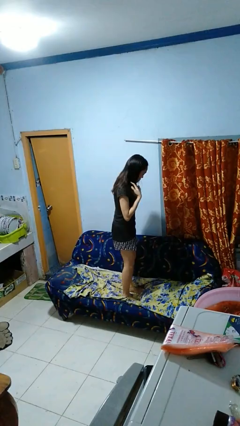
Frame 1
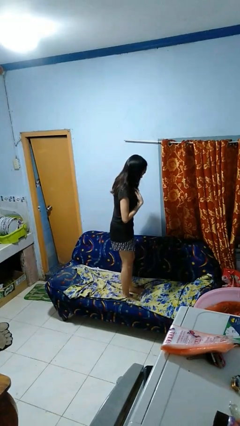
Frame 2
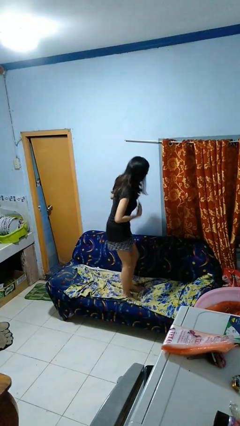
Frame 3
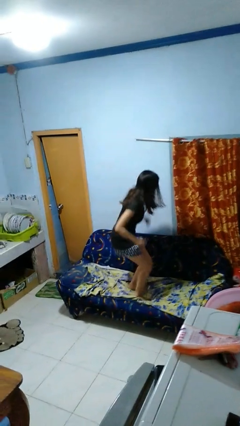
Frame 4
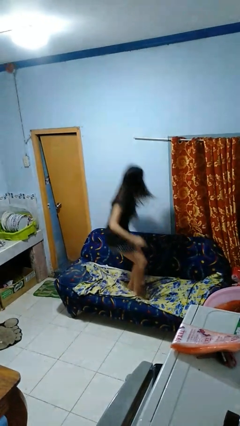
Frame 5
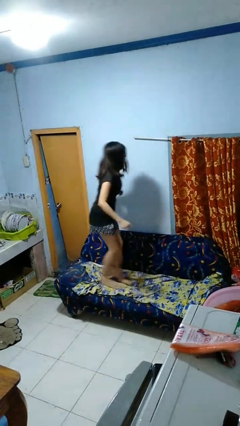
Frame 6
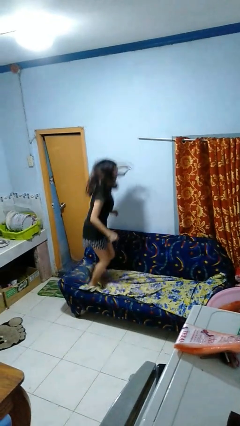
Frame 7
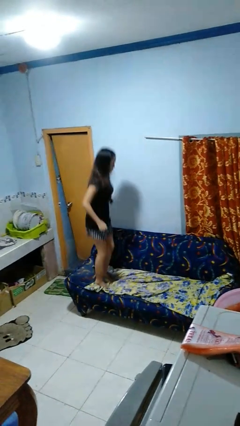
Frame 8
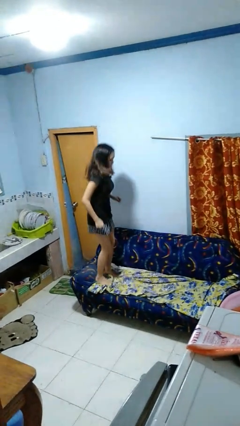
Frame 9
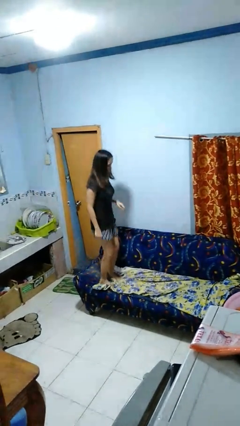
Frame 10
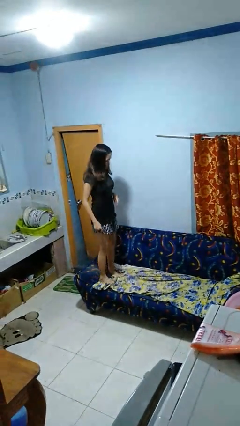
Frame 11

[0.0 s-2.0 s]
person jumps on couch

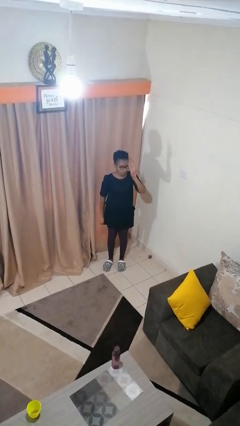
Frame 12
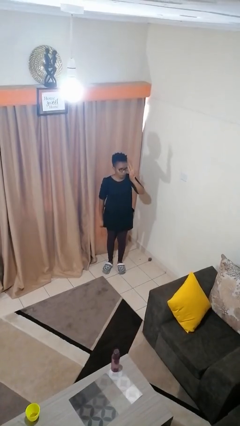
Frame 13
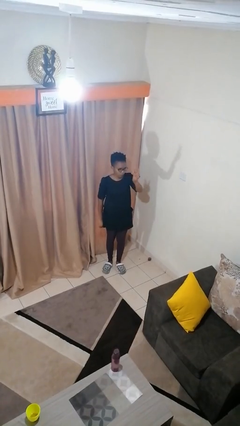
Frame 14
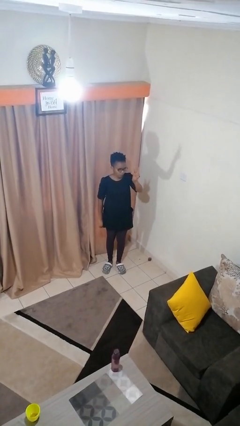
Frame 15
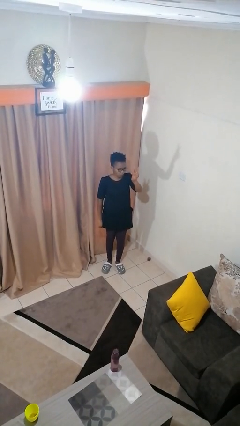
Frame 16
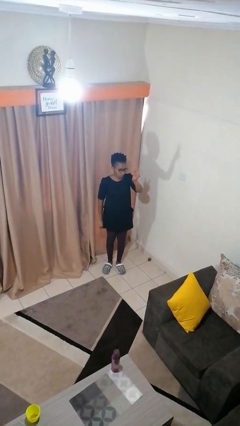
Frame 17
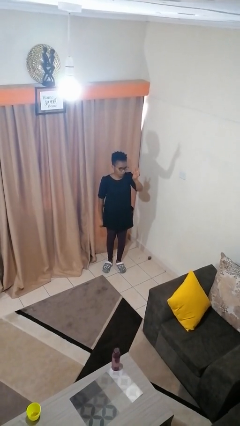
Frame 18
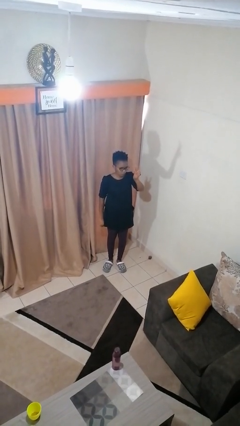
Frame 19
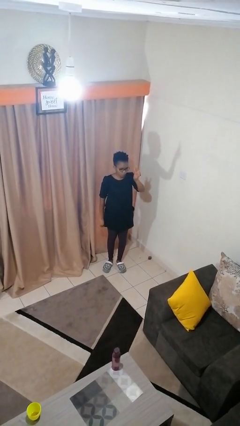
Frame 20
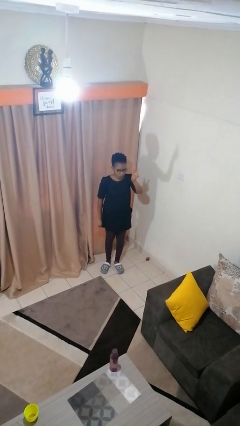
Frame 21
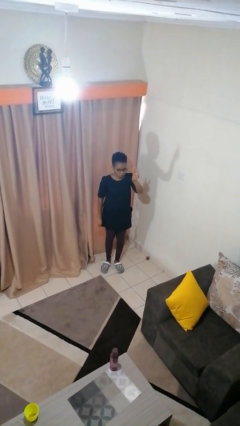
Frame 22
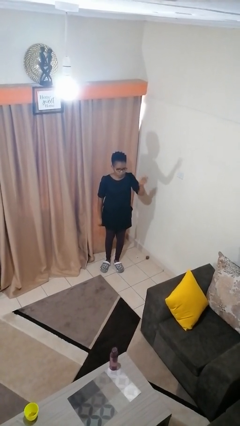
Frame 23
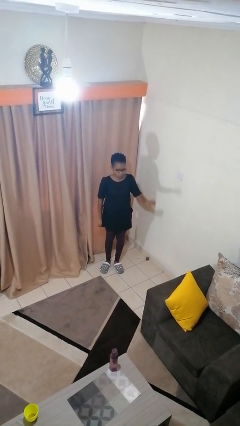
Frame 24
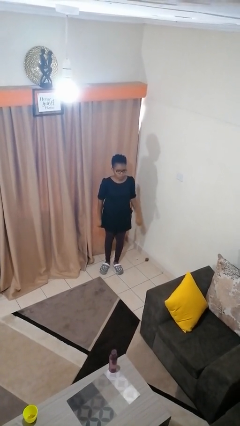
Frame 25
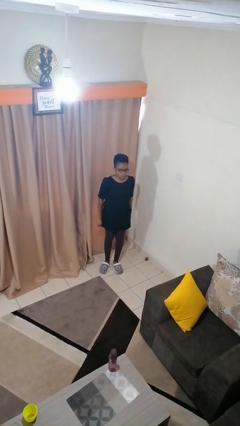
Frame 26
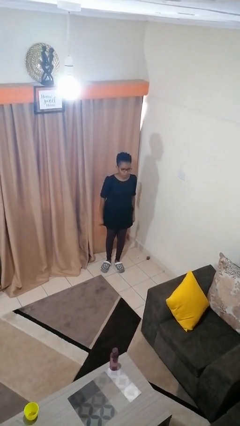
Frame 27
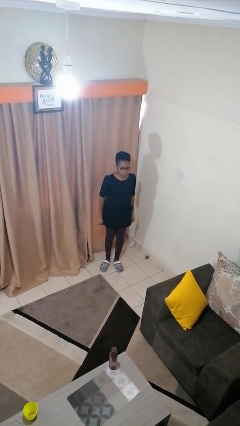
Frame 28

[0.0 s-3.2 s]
person gestures number three

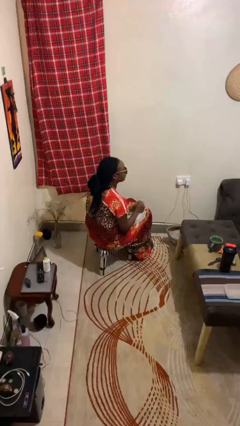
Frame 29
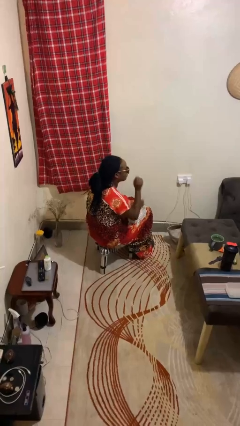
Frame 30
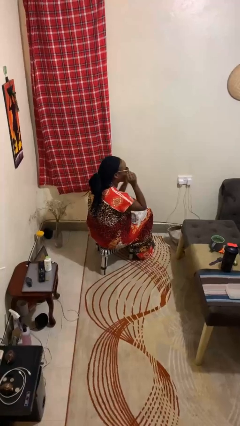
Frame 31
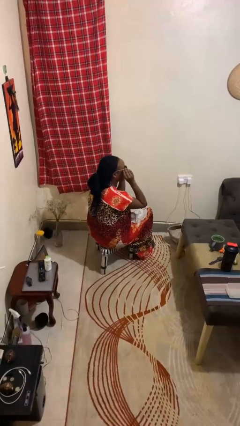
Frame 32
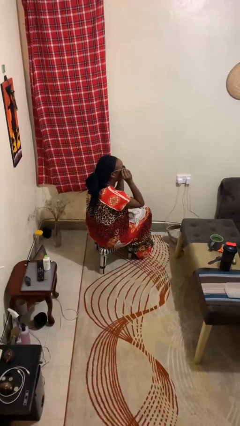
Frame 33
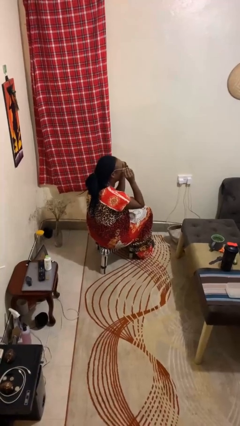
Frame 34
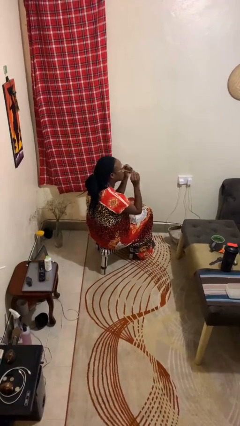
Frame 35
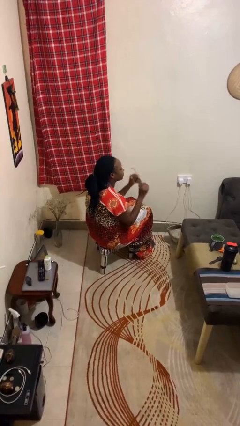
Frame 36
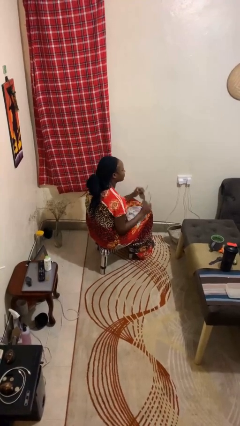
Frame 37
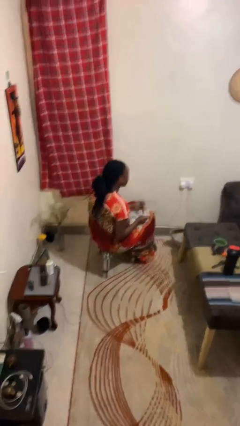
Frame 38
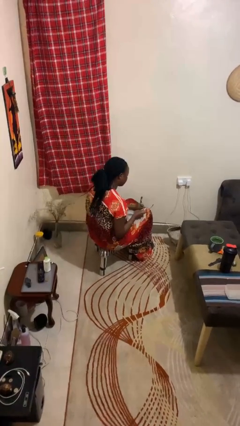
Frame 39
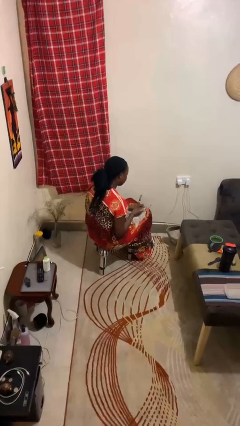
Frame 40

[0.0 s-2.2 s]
person takes off sunglasses

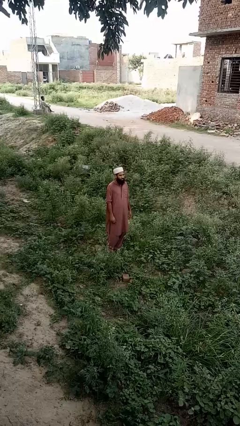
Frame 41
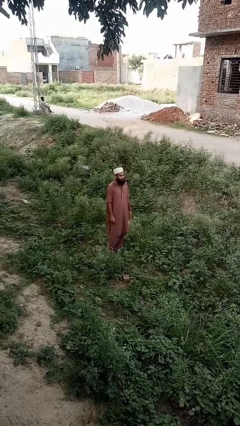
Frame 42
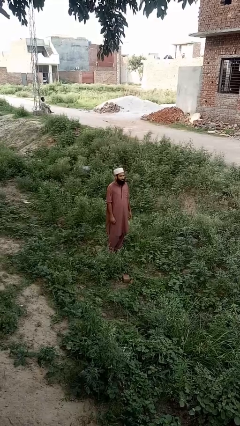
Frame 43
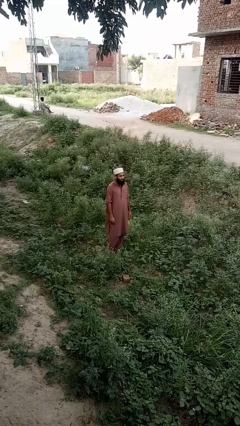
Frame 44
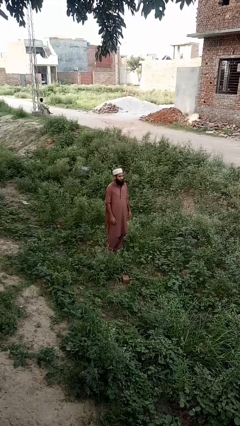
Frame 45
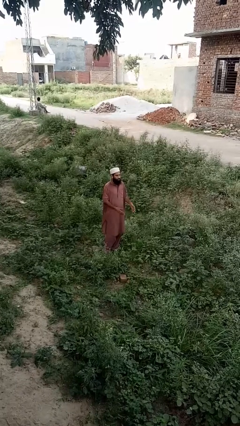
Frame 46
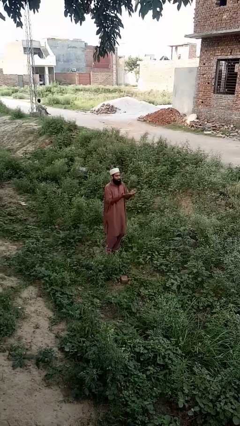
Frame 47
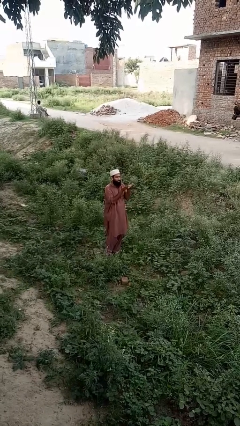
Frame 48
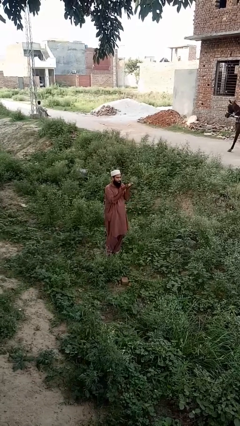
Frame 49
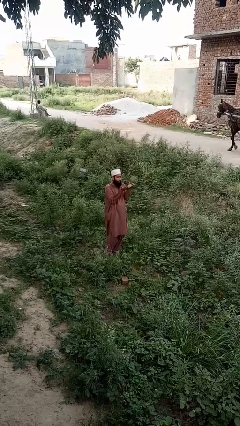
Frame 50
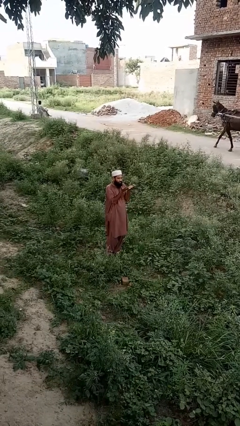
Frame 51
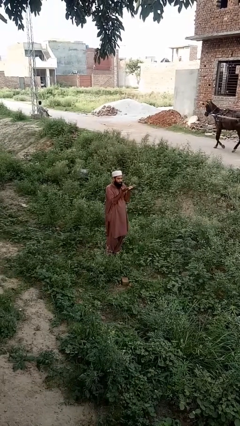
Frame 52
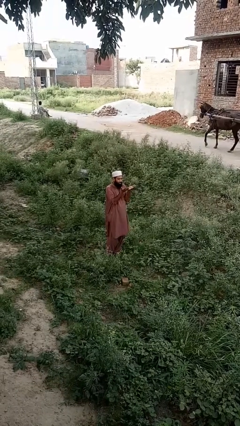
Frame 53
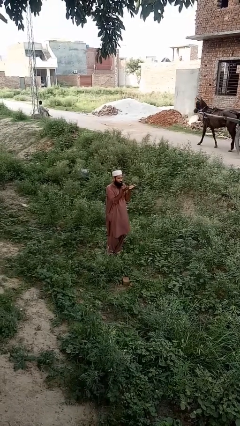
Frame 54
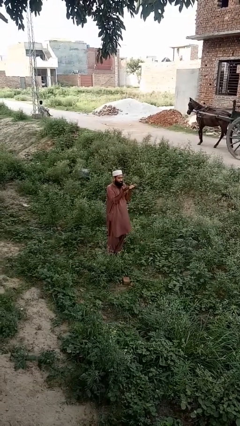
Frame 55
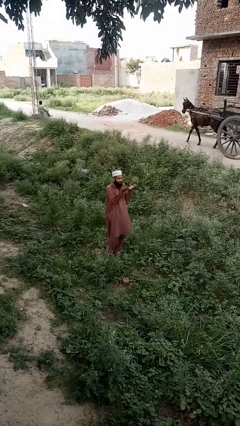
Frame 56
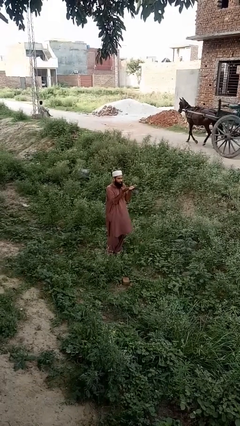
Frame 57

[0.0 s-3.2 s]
person prays

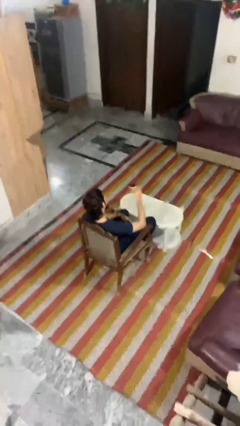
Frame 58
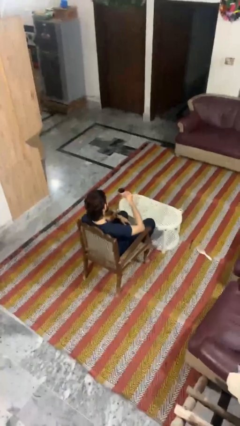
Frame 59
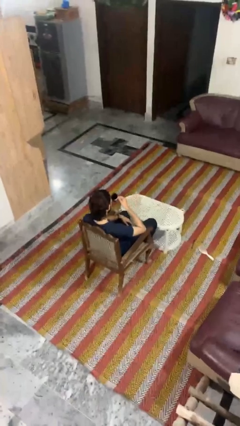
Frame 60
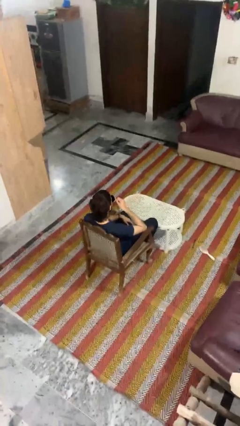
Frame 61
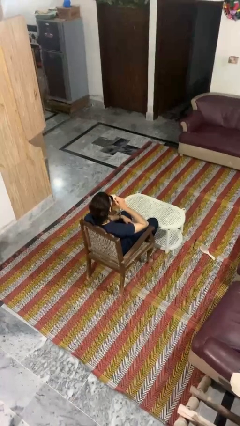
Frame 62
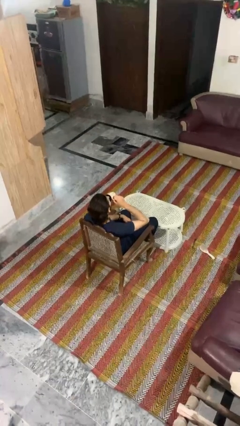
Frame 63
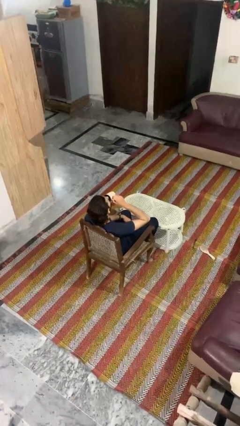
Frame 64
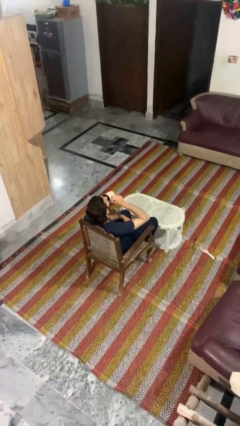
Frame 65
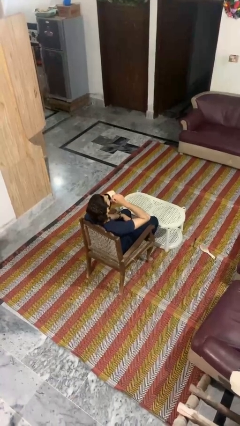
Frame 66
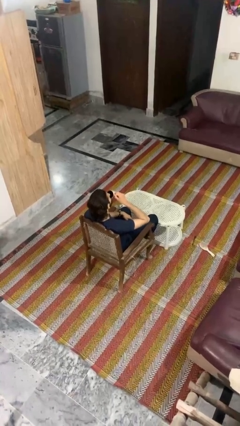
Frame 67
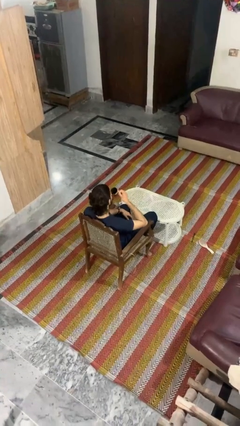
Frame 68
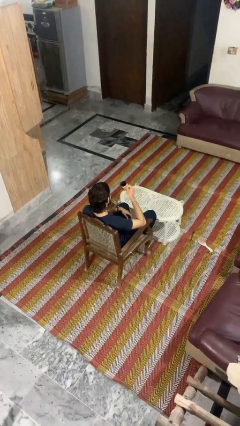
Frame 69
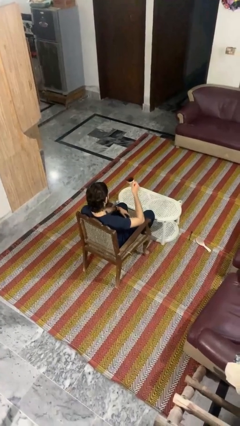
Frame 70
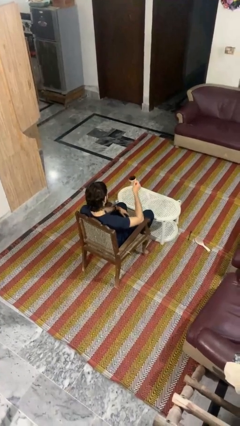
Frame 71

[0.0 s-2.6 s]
person drinks from mug

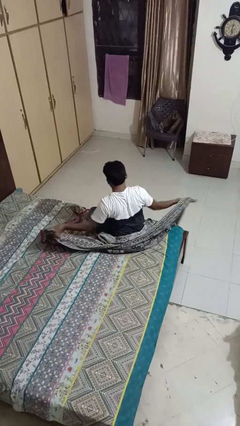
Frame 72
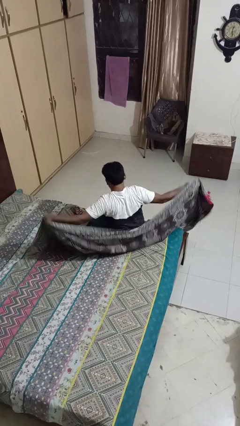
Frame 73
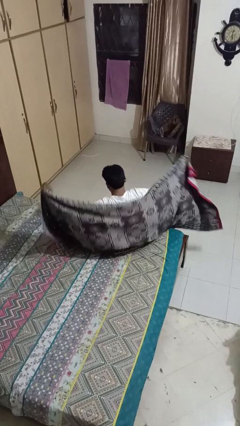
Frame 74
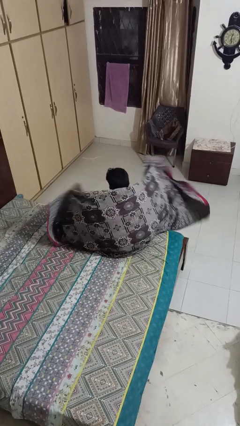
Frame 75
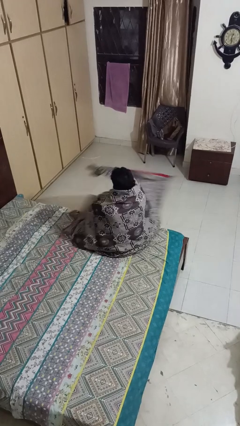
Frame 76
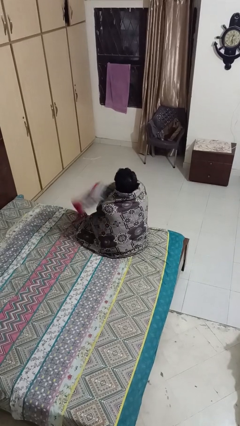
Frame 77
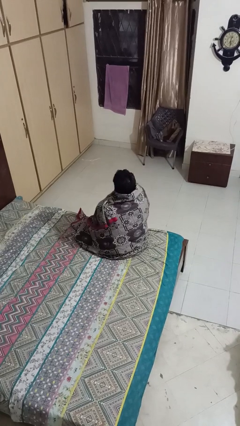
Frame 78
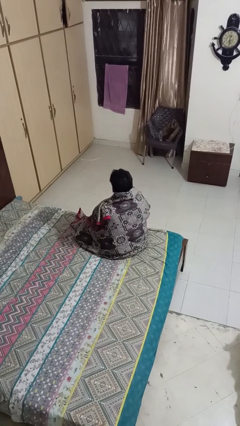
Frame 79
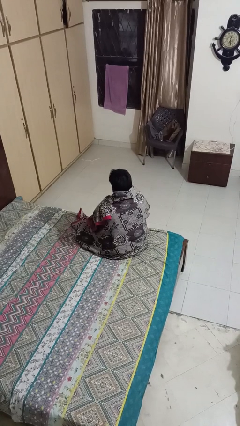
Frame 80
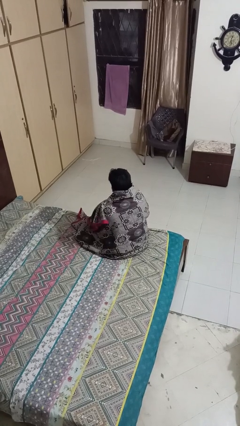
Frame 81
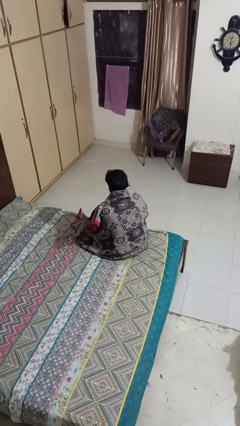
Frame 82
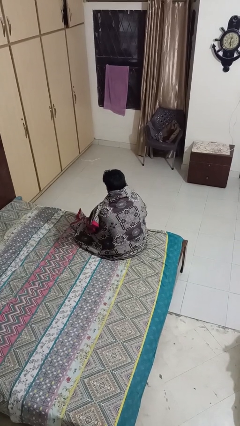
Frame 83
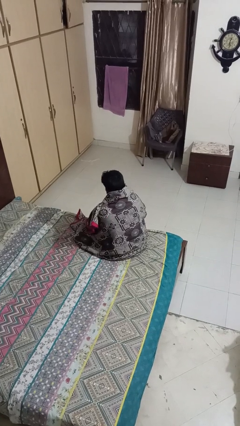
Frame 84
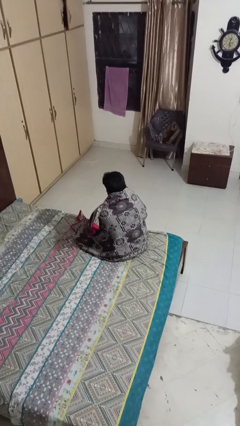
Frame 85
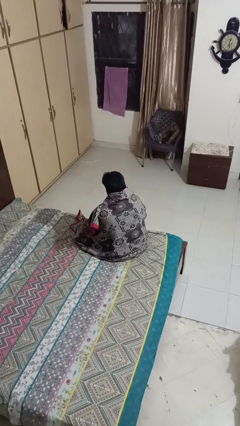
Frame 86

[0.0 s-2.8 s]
person covers with blanket

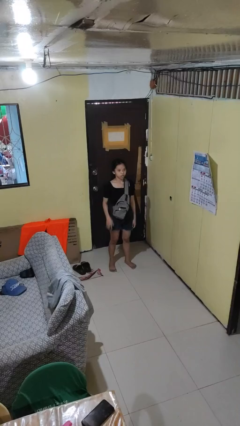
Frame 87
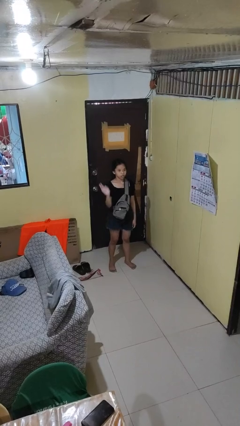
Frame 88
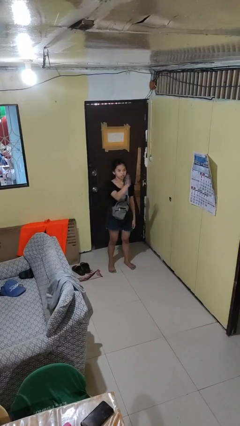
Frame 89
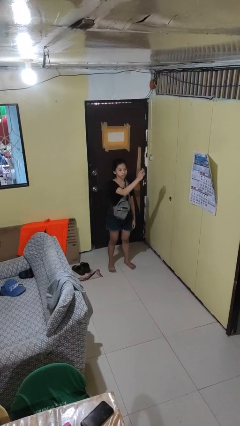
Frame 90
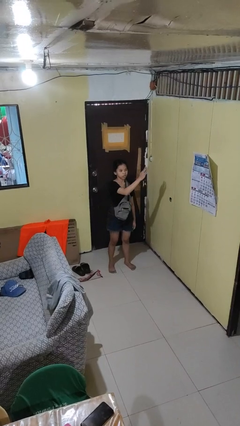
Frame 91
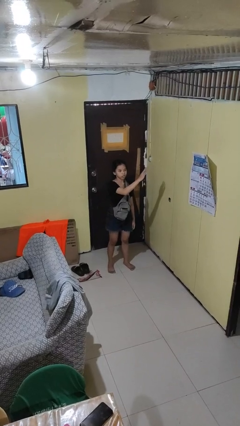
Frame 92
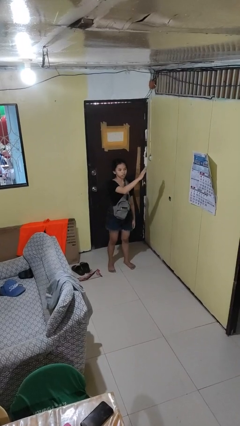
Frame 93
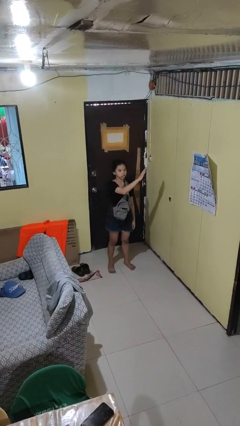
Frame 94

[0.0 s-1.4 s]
person gestures swipe left
